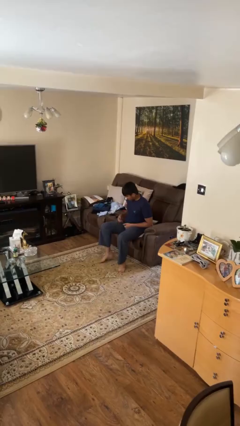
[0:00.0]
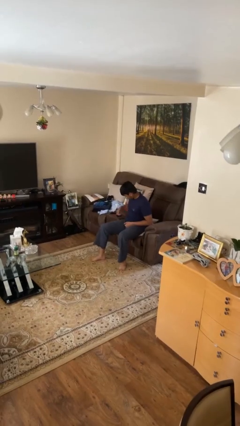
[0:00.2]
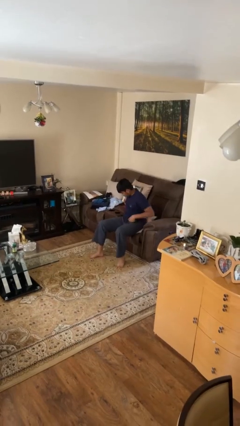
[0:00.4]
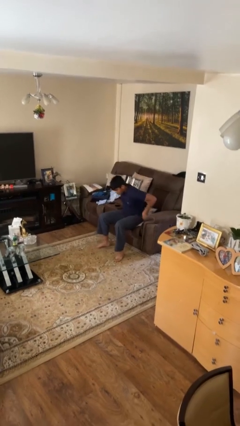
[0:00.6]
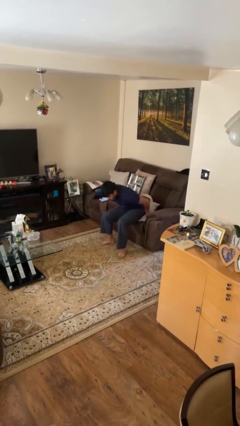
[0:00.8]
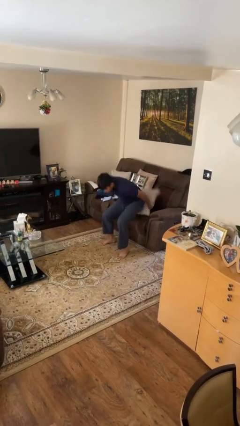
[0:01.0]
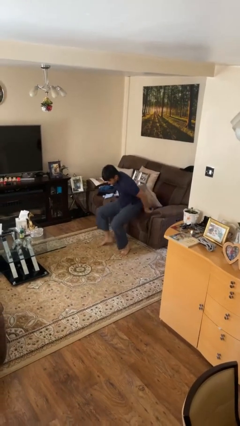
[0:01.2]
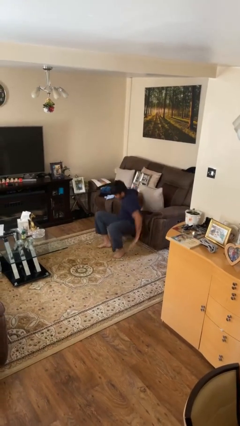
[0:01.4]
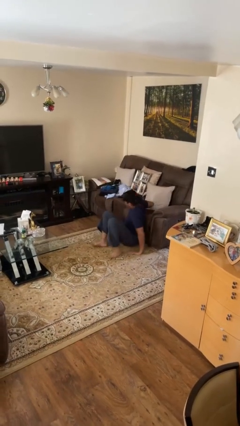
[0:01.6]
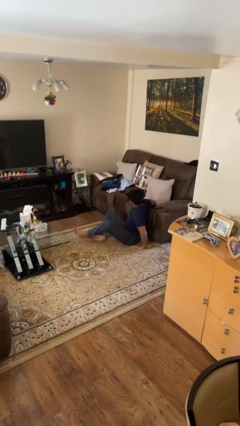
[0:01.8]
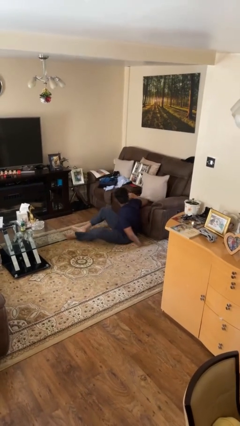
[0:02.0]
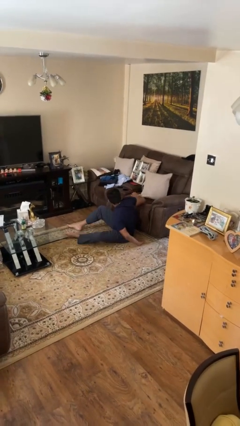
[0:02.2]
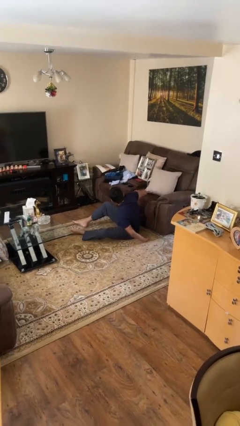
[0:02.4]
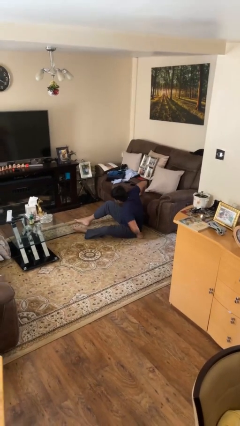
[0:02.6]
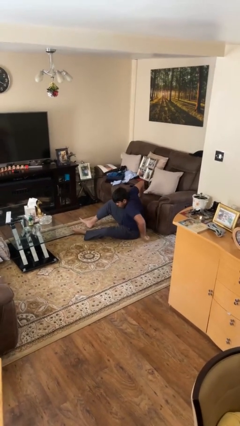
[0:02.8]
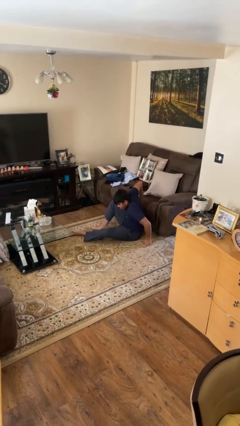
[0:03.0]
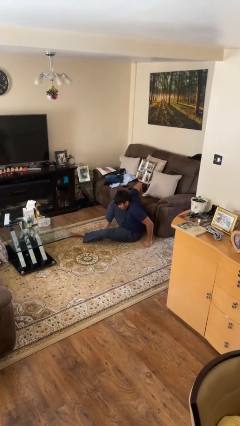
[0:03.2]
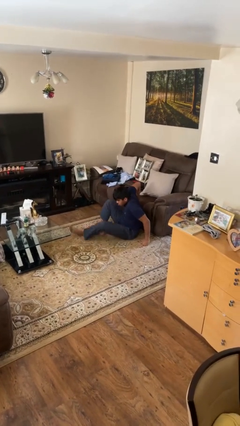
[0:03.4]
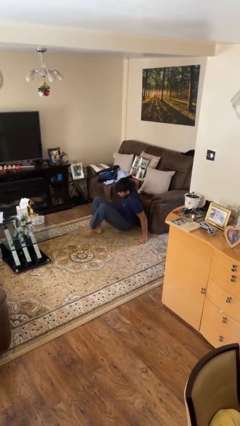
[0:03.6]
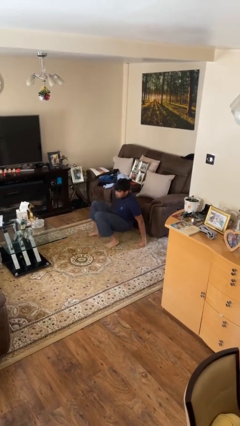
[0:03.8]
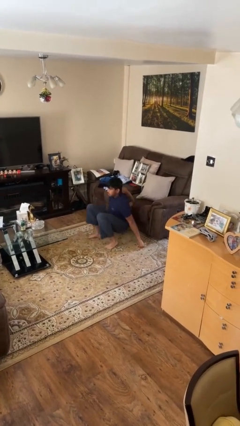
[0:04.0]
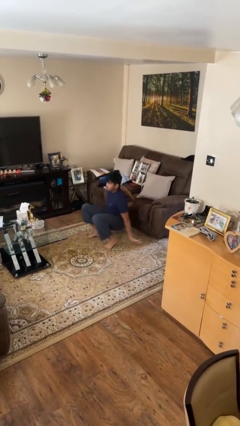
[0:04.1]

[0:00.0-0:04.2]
person falls from chair

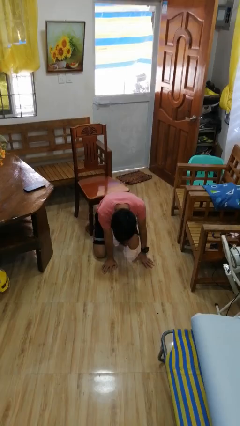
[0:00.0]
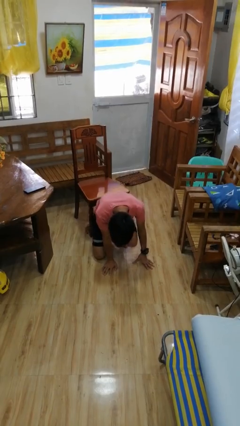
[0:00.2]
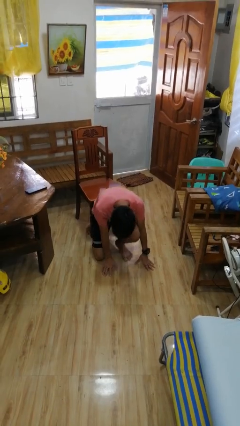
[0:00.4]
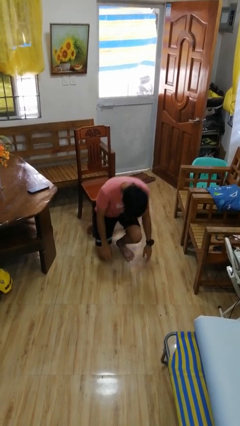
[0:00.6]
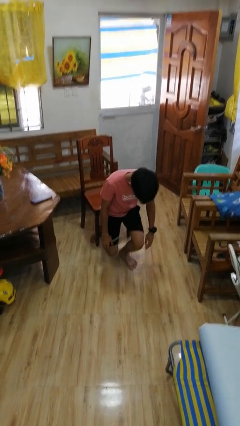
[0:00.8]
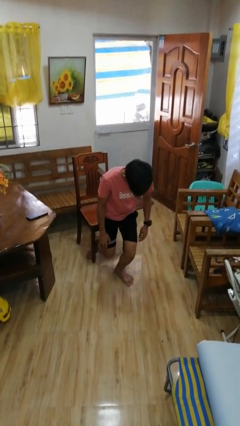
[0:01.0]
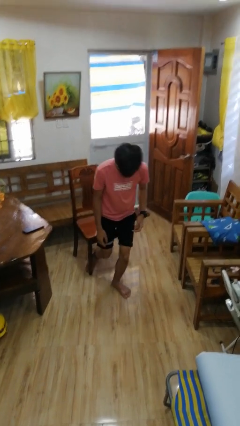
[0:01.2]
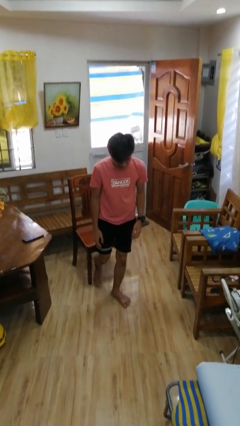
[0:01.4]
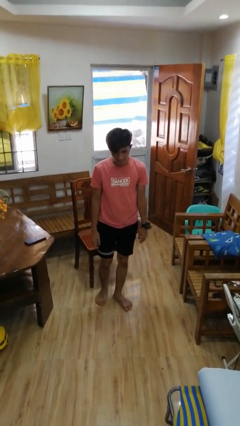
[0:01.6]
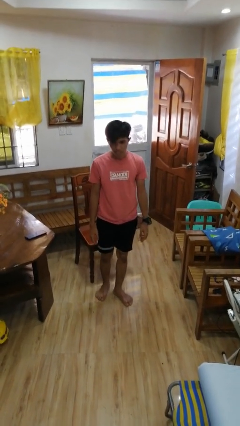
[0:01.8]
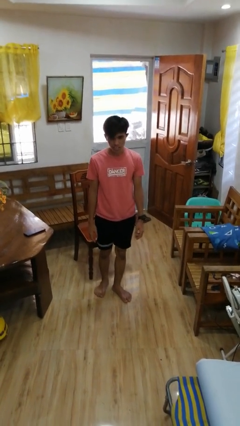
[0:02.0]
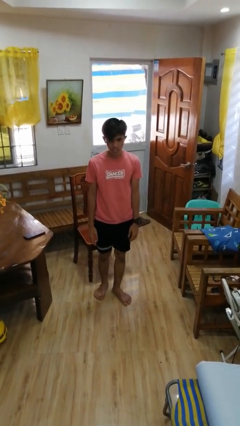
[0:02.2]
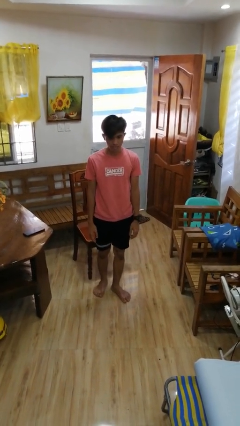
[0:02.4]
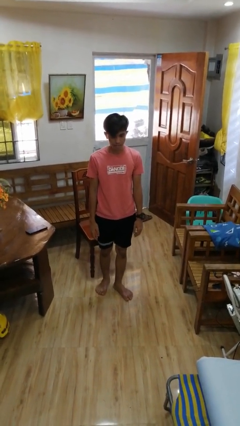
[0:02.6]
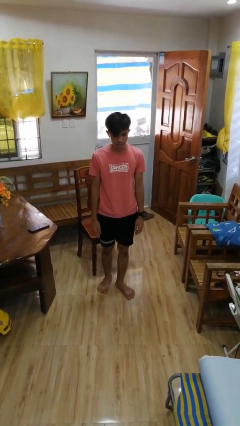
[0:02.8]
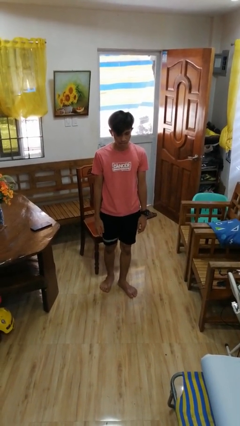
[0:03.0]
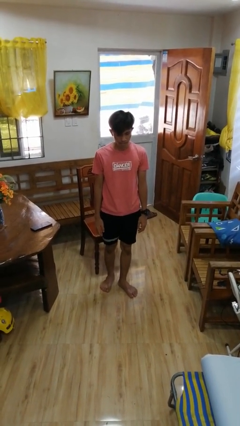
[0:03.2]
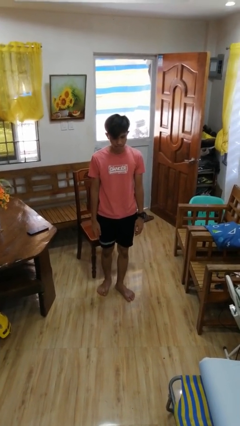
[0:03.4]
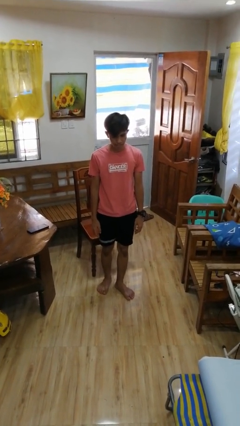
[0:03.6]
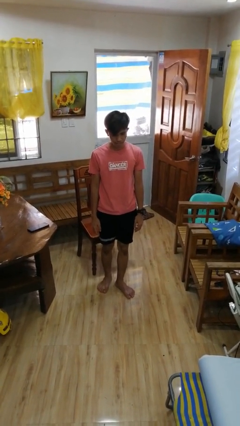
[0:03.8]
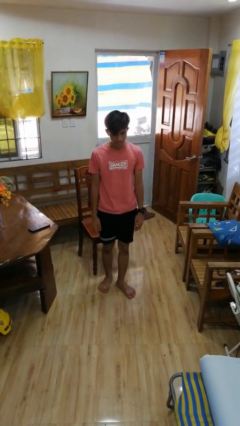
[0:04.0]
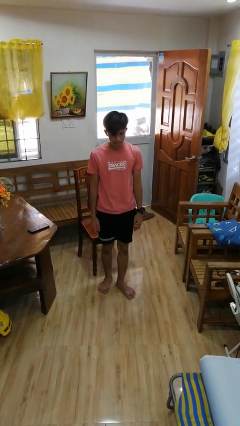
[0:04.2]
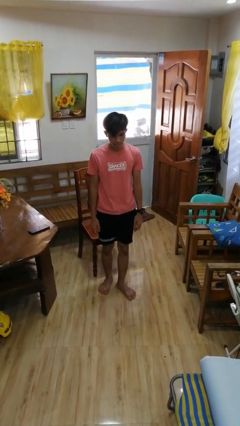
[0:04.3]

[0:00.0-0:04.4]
person stands up from floor

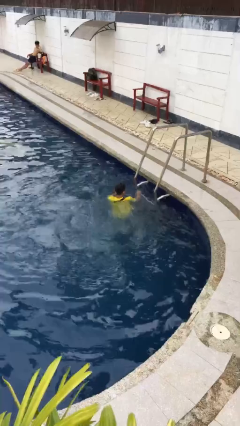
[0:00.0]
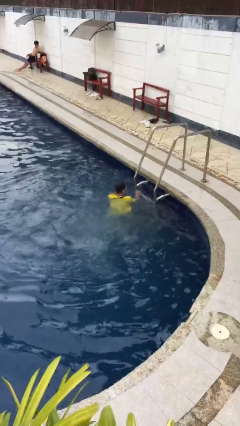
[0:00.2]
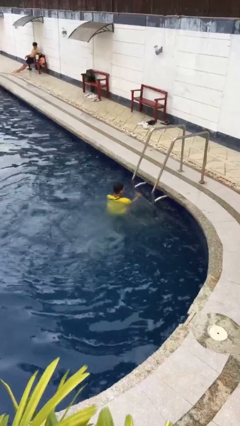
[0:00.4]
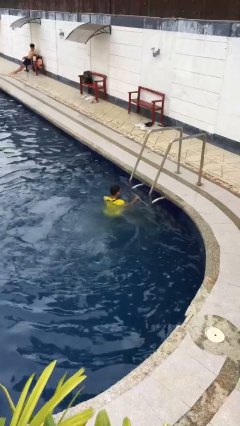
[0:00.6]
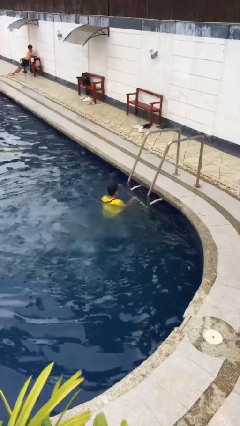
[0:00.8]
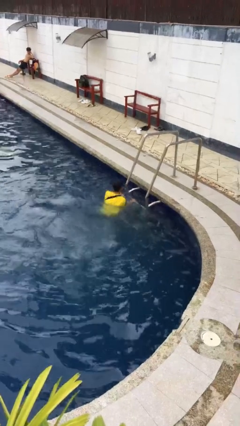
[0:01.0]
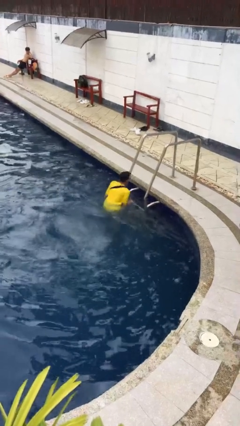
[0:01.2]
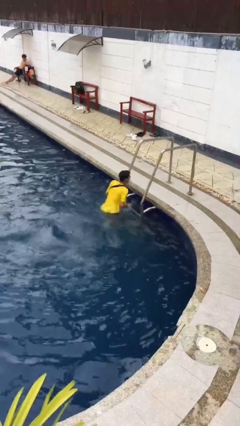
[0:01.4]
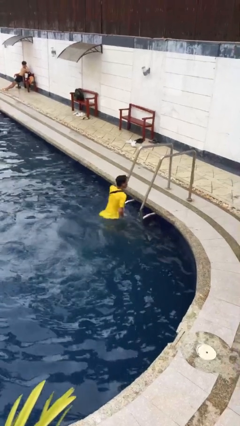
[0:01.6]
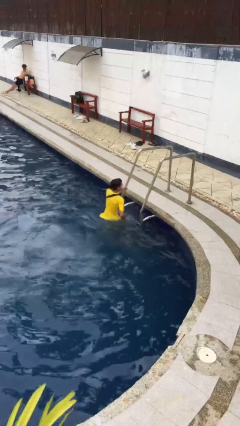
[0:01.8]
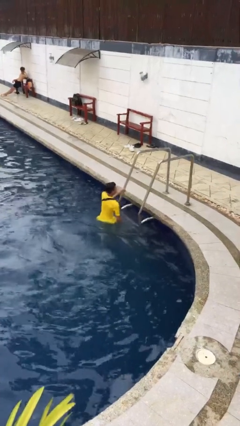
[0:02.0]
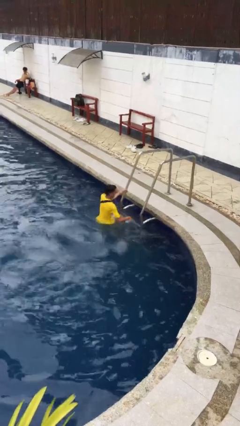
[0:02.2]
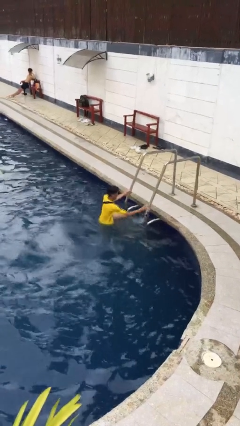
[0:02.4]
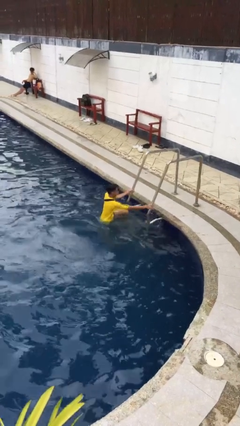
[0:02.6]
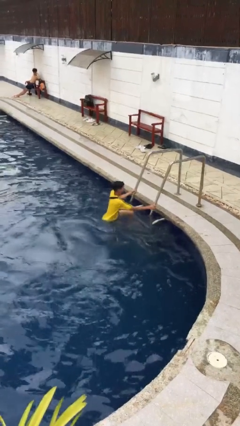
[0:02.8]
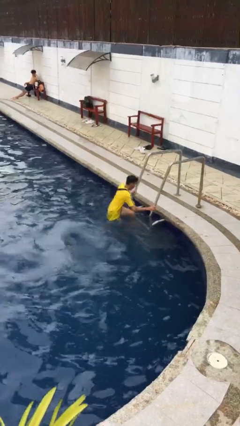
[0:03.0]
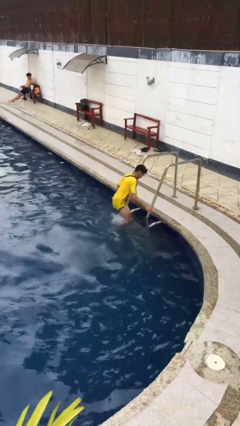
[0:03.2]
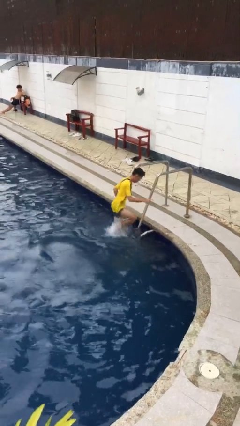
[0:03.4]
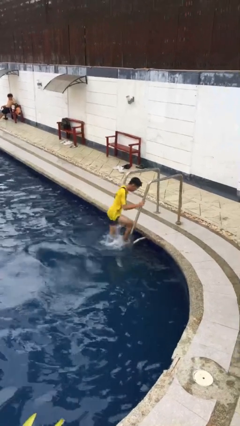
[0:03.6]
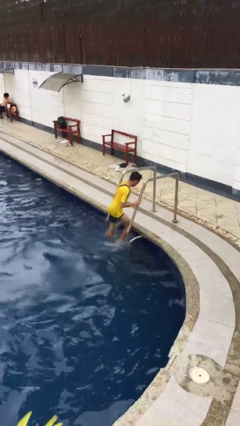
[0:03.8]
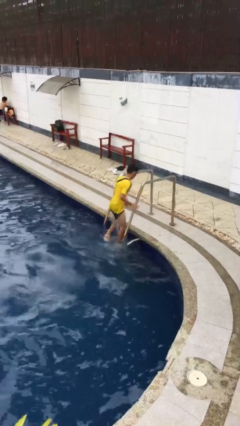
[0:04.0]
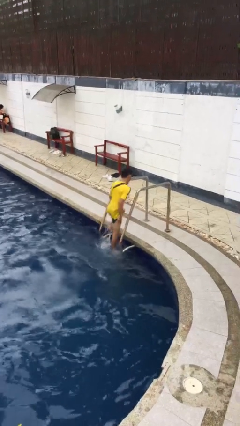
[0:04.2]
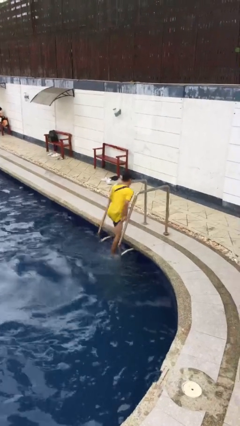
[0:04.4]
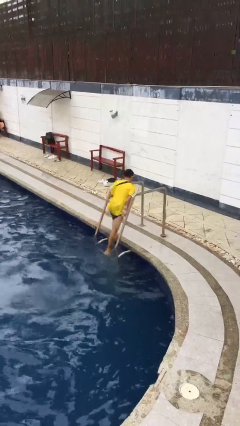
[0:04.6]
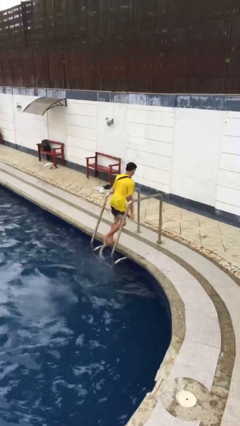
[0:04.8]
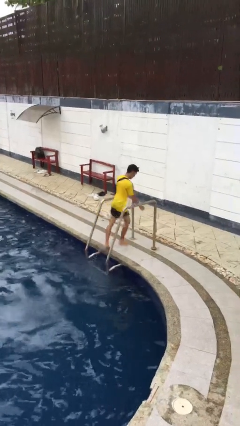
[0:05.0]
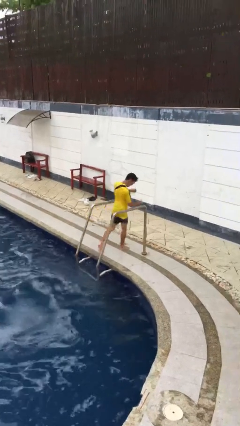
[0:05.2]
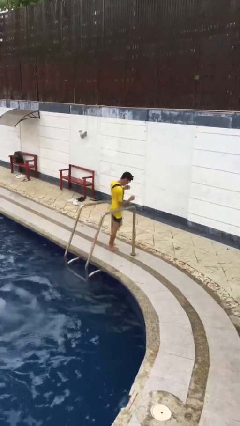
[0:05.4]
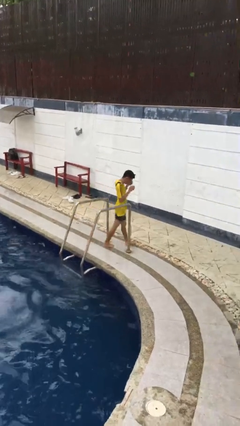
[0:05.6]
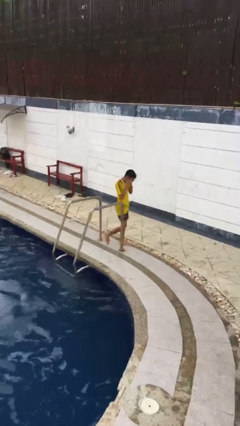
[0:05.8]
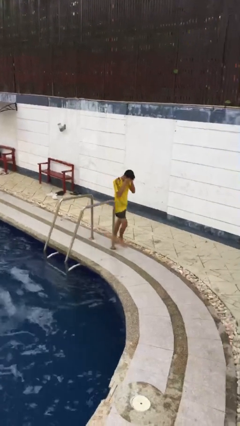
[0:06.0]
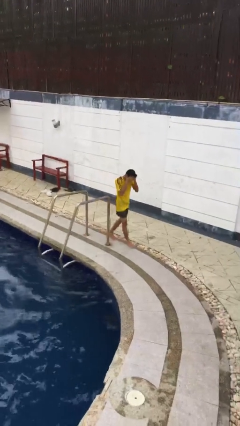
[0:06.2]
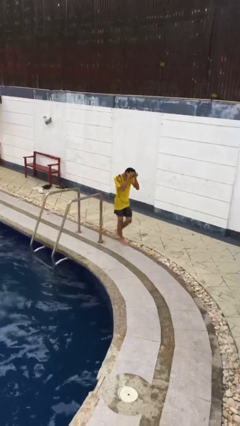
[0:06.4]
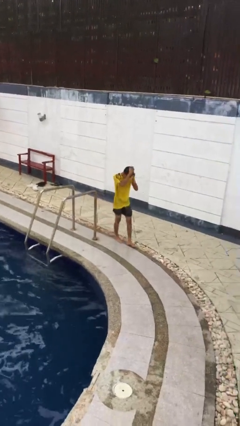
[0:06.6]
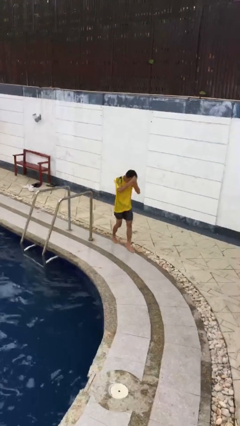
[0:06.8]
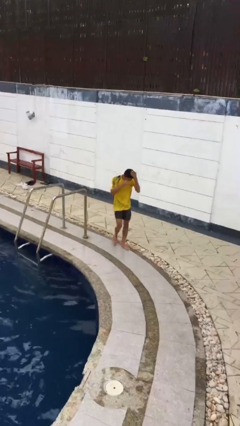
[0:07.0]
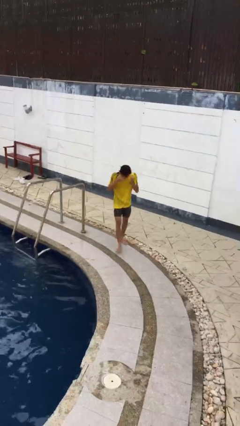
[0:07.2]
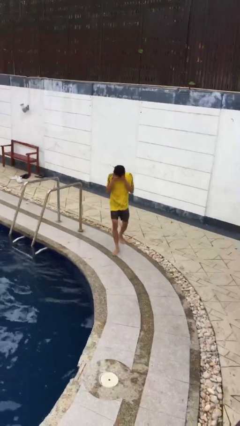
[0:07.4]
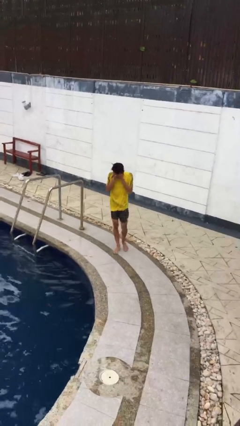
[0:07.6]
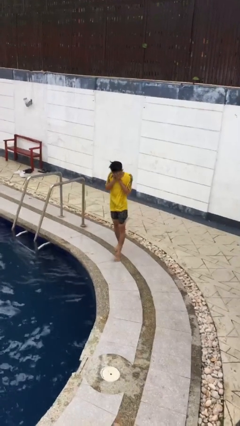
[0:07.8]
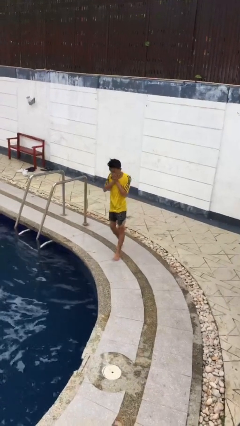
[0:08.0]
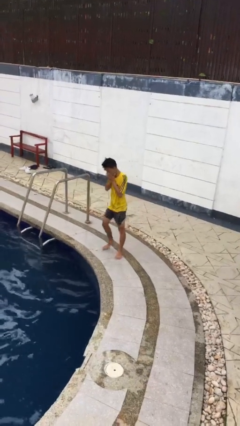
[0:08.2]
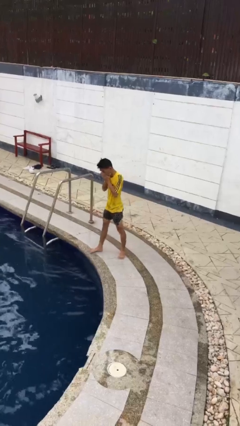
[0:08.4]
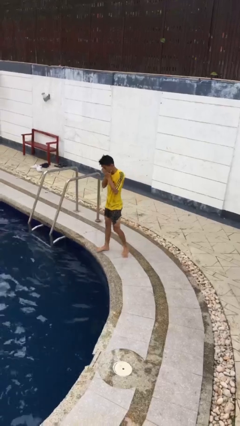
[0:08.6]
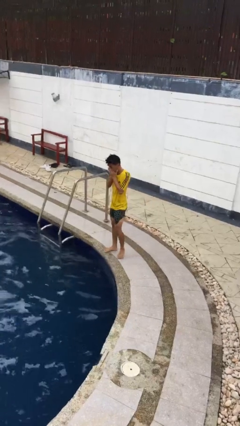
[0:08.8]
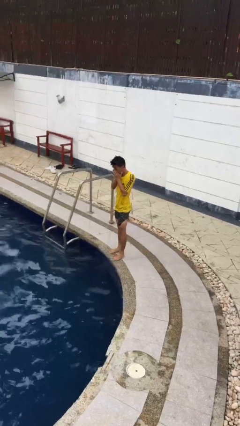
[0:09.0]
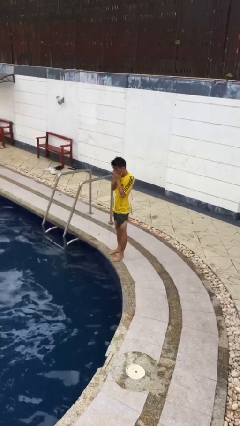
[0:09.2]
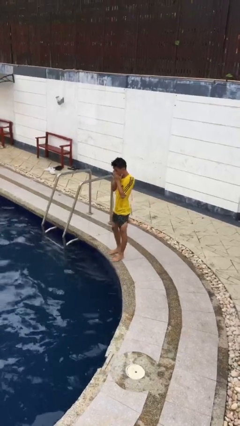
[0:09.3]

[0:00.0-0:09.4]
person exits pool
